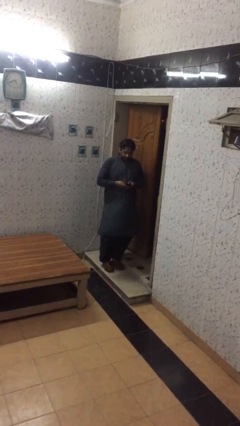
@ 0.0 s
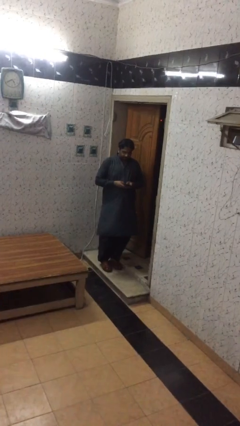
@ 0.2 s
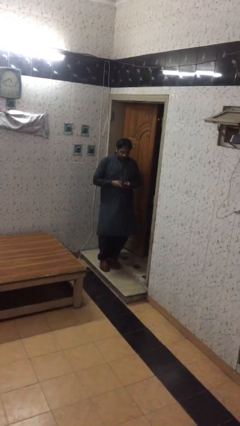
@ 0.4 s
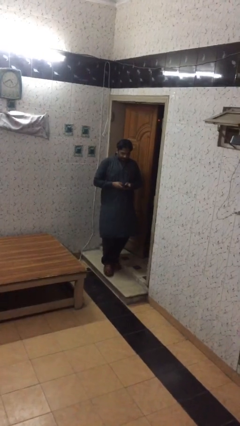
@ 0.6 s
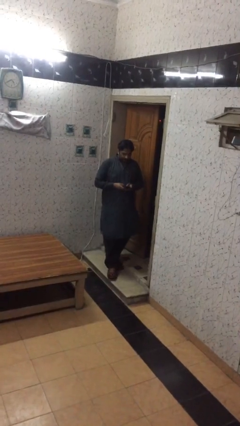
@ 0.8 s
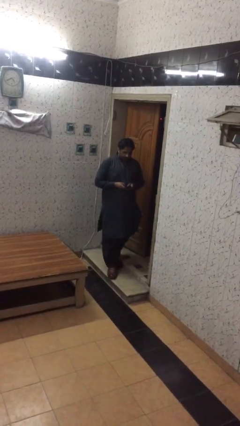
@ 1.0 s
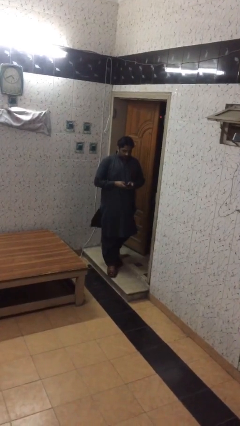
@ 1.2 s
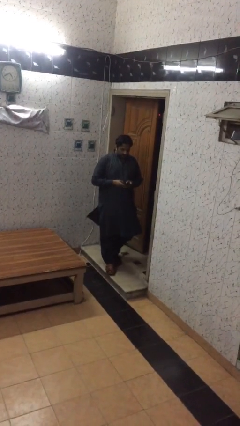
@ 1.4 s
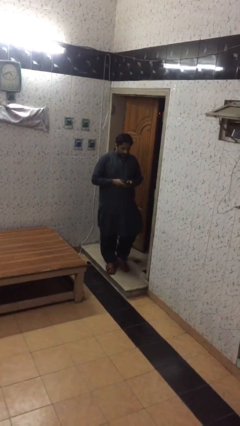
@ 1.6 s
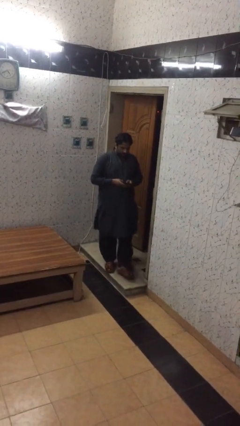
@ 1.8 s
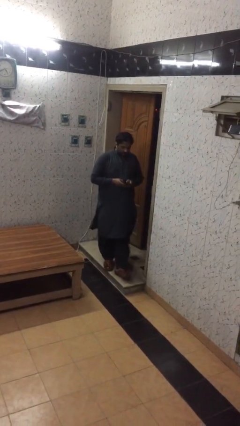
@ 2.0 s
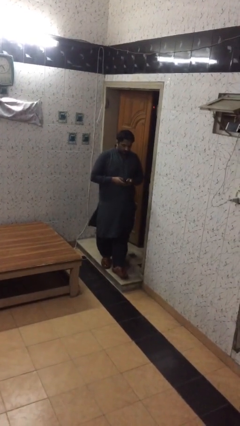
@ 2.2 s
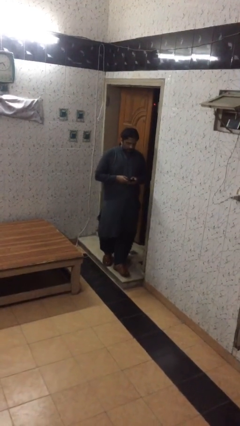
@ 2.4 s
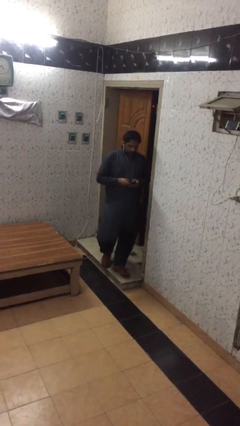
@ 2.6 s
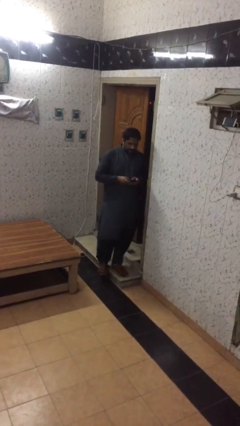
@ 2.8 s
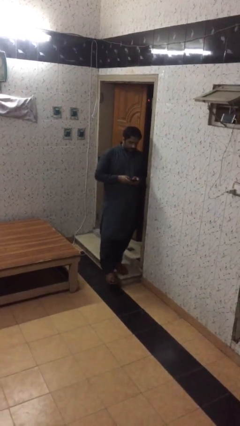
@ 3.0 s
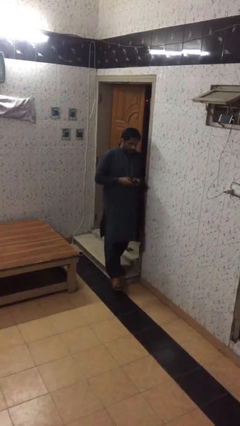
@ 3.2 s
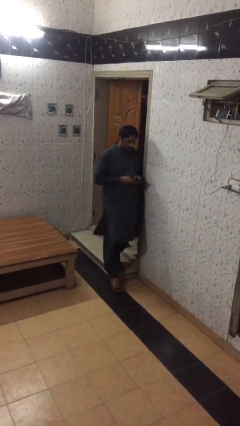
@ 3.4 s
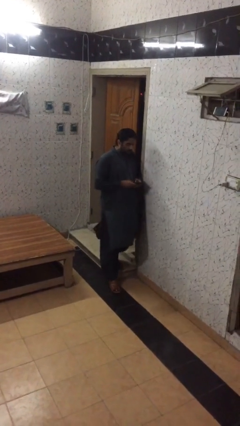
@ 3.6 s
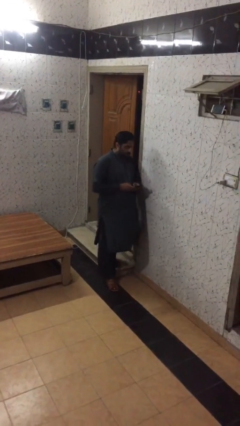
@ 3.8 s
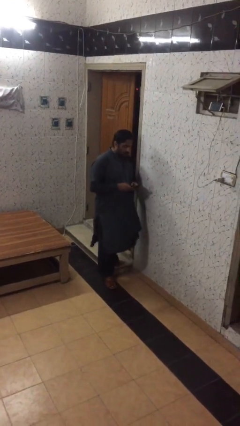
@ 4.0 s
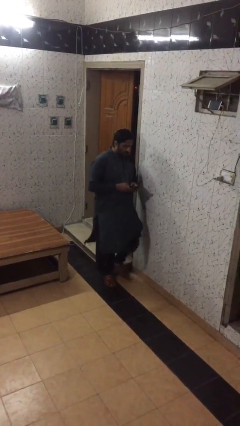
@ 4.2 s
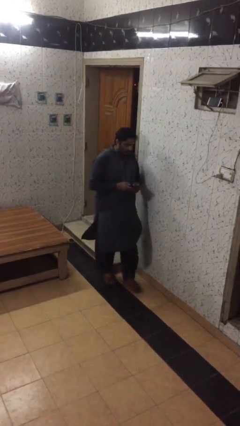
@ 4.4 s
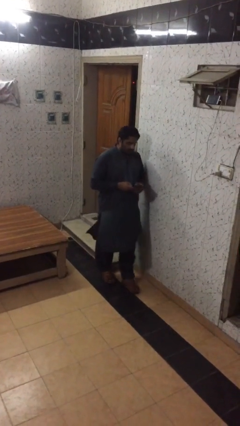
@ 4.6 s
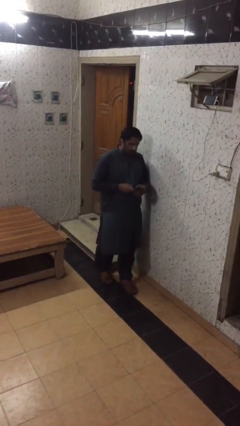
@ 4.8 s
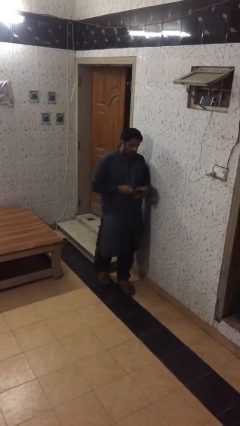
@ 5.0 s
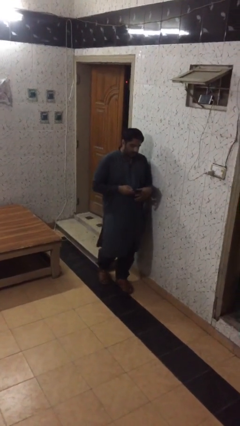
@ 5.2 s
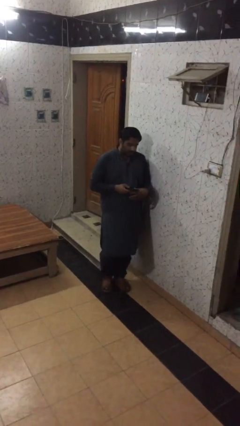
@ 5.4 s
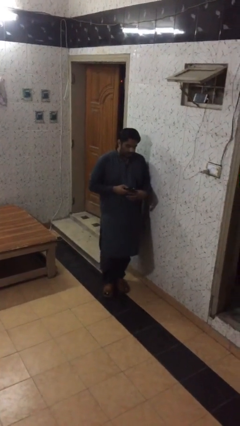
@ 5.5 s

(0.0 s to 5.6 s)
person texts on phone

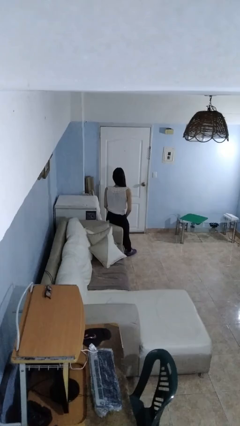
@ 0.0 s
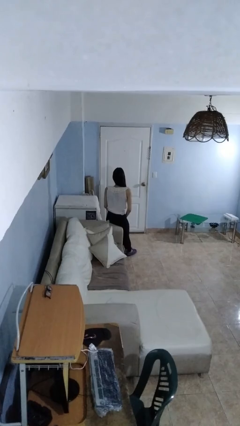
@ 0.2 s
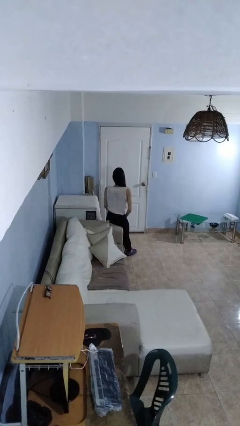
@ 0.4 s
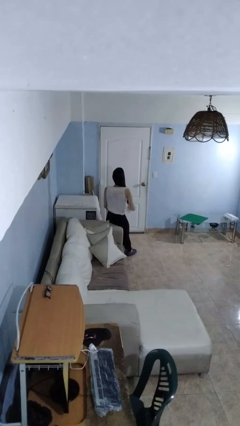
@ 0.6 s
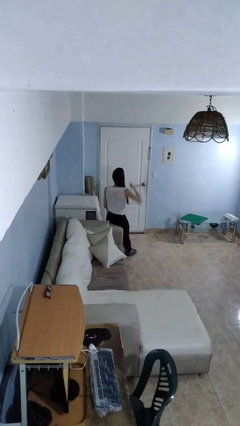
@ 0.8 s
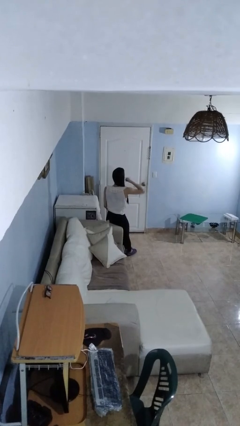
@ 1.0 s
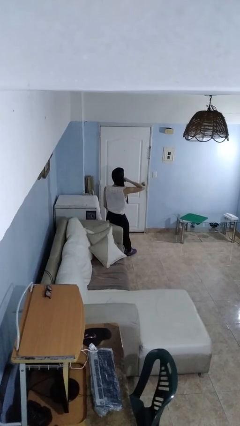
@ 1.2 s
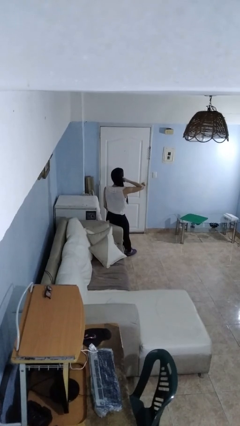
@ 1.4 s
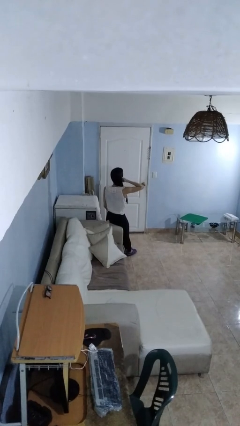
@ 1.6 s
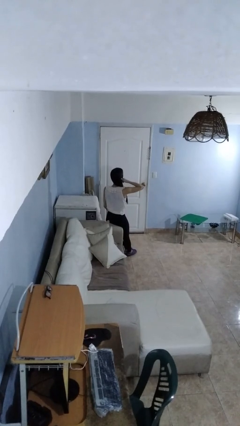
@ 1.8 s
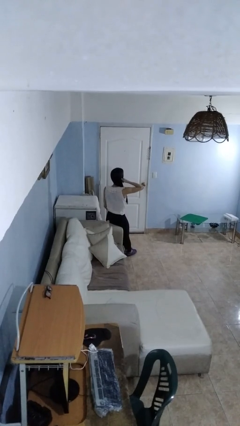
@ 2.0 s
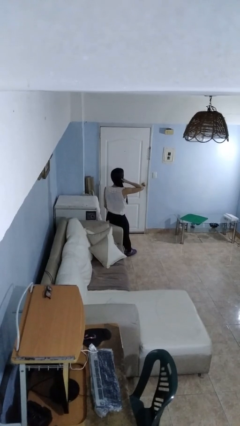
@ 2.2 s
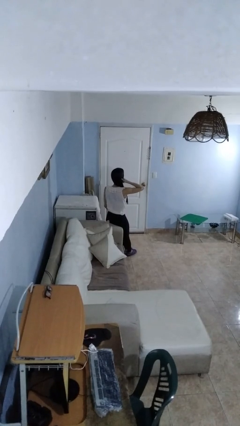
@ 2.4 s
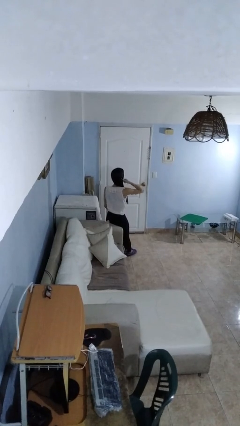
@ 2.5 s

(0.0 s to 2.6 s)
person gestures call me

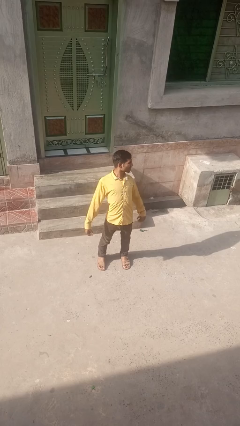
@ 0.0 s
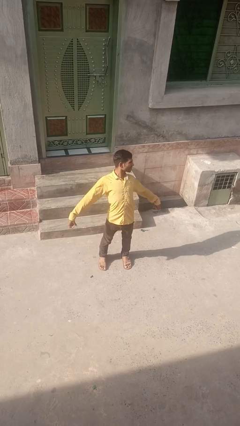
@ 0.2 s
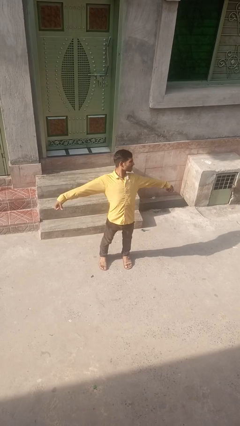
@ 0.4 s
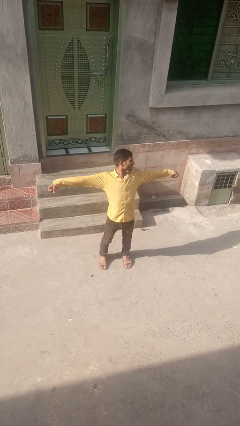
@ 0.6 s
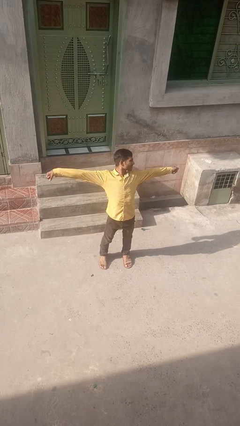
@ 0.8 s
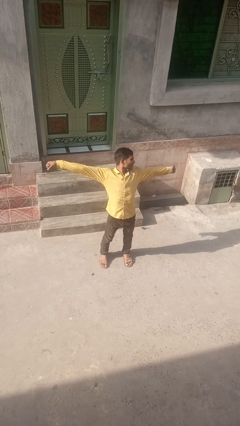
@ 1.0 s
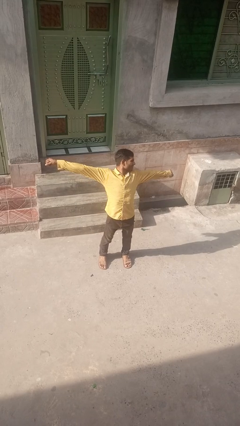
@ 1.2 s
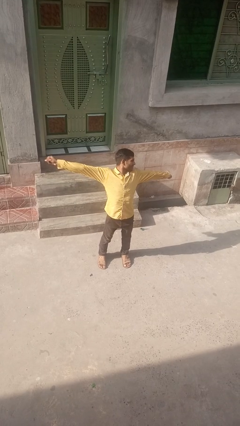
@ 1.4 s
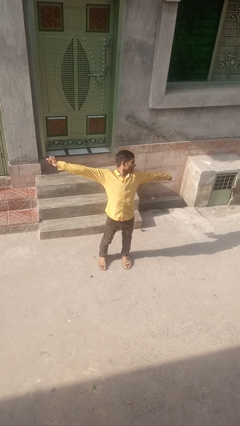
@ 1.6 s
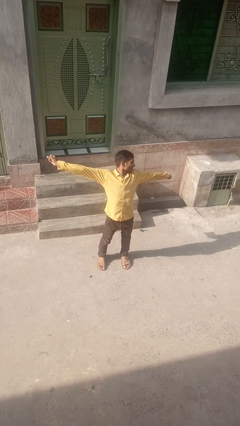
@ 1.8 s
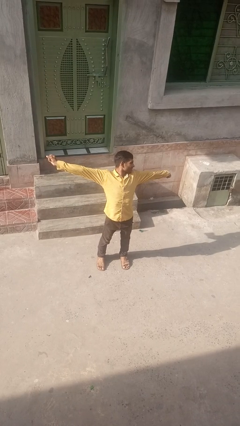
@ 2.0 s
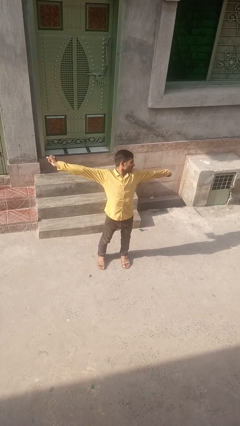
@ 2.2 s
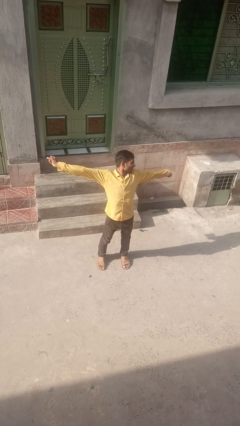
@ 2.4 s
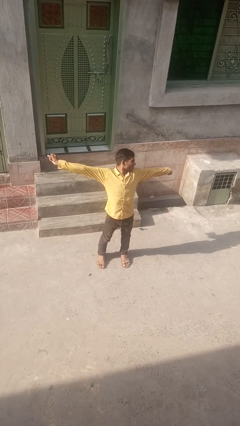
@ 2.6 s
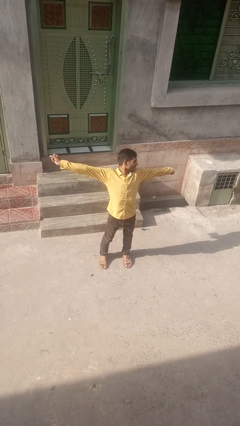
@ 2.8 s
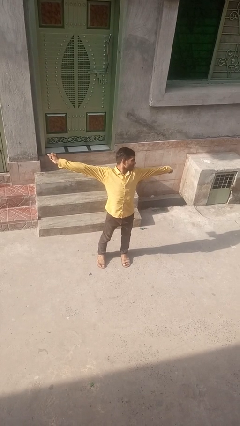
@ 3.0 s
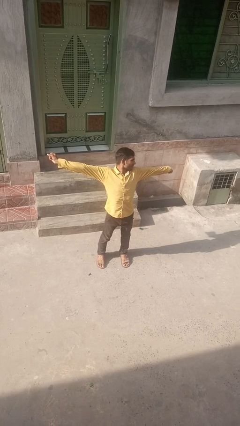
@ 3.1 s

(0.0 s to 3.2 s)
person stretches arms to side

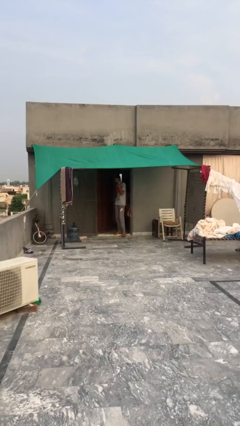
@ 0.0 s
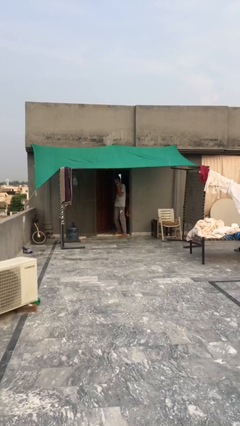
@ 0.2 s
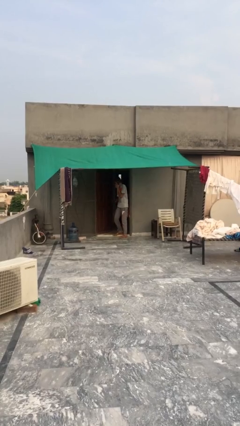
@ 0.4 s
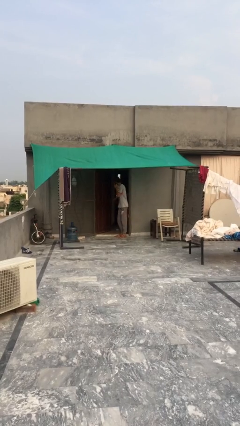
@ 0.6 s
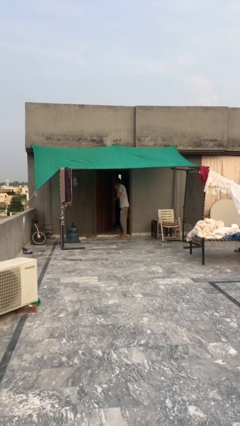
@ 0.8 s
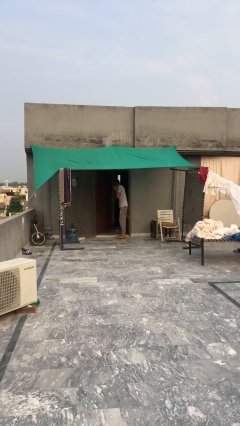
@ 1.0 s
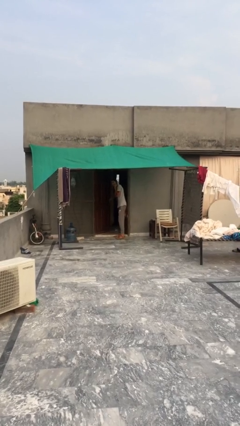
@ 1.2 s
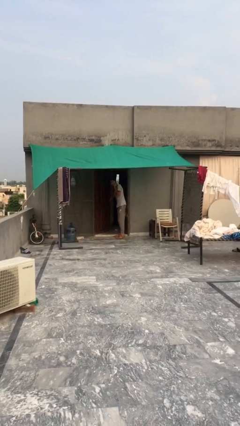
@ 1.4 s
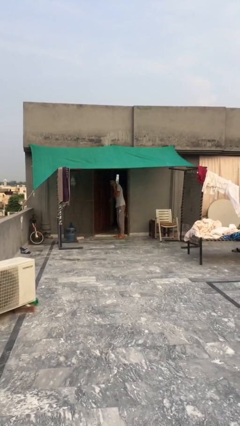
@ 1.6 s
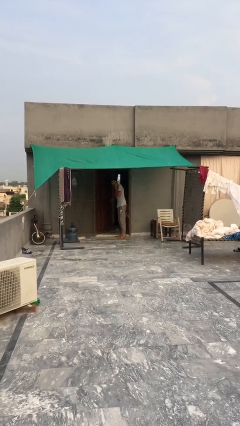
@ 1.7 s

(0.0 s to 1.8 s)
person enters scene through structure

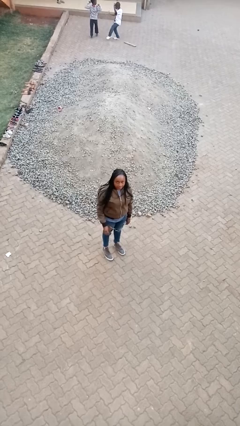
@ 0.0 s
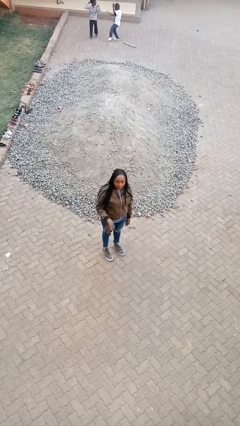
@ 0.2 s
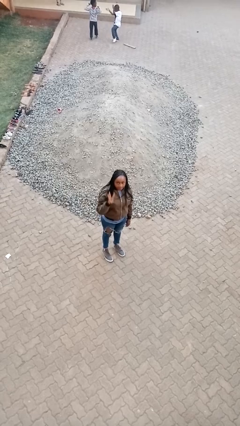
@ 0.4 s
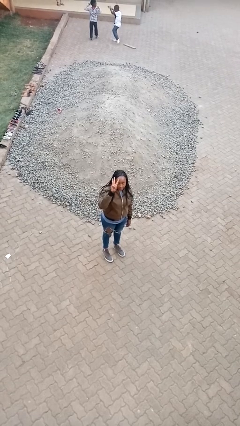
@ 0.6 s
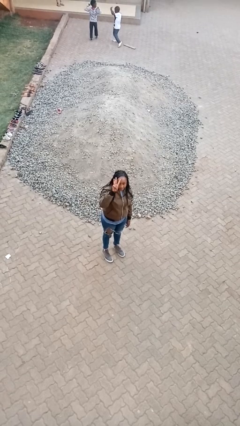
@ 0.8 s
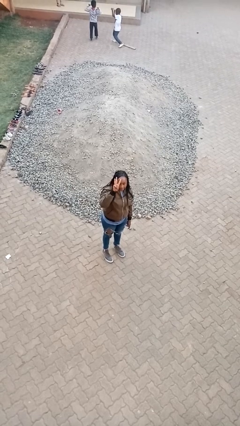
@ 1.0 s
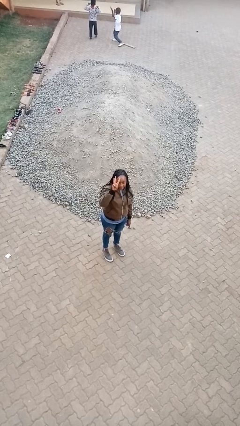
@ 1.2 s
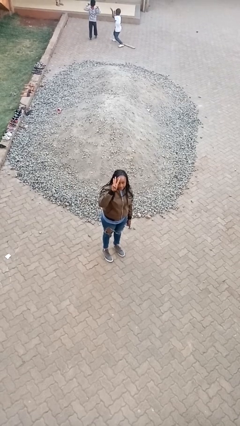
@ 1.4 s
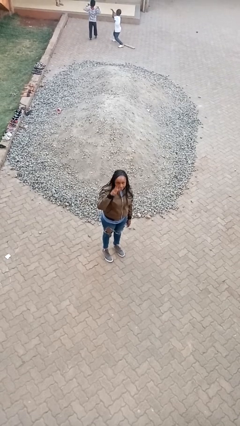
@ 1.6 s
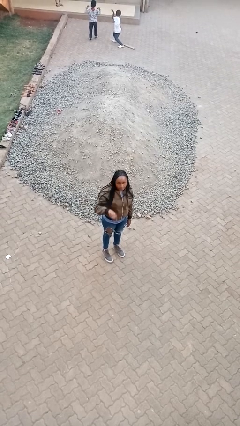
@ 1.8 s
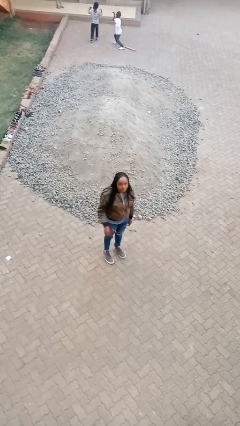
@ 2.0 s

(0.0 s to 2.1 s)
person gestures number three

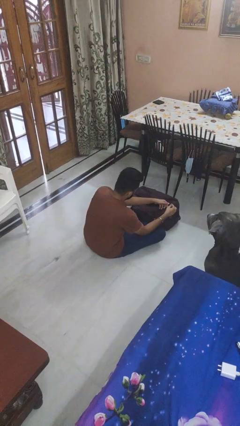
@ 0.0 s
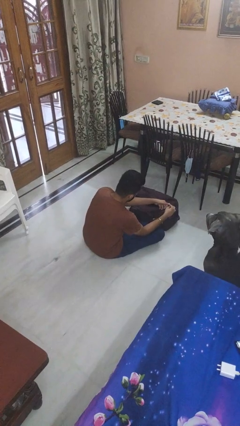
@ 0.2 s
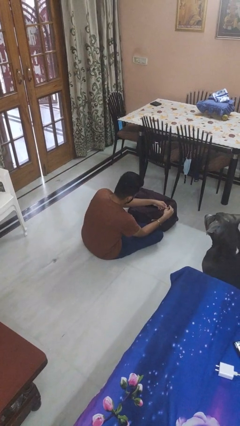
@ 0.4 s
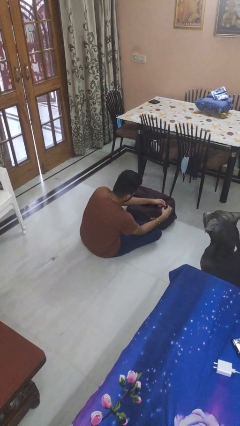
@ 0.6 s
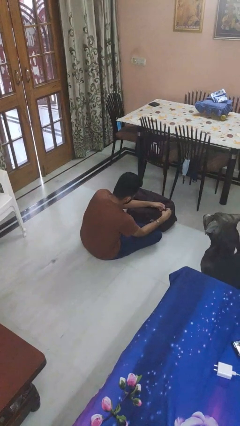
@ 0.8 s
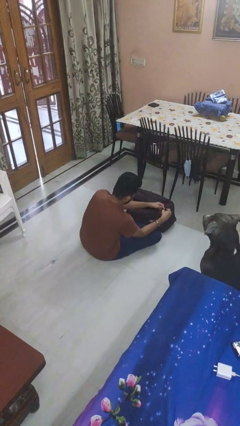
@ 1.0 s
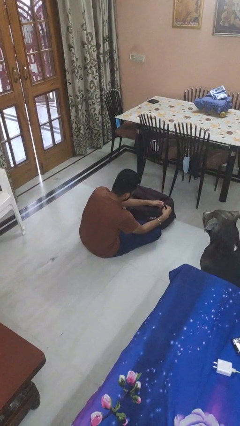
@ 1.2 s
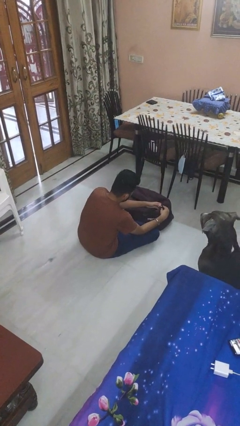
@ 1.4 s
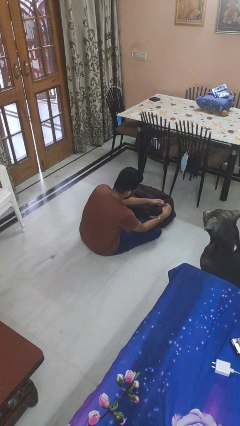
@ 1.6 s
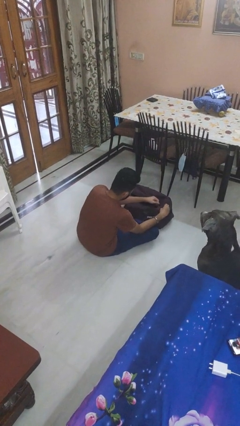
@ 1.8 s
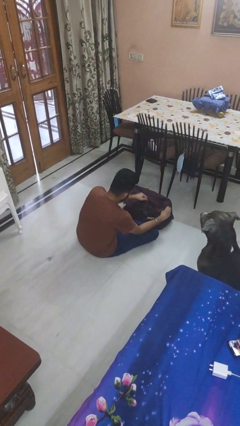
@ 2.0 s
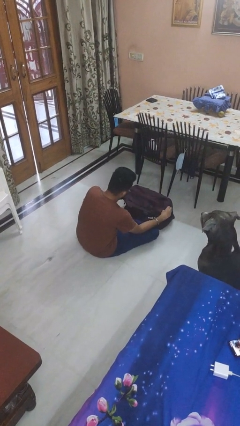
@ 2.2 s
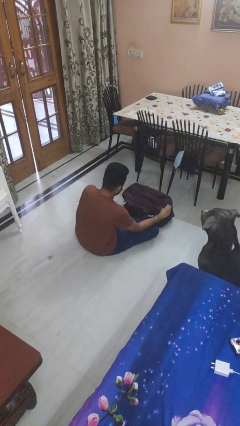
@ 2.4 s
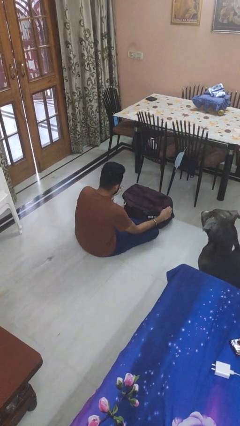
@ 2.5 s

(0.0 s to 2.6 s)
person closes suitcase
